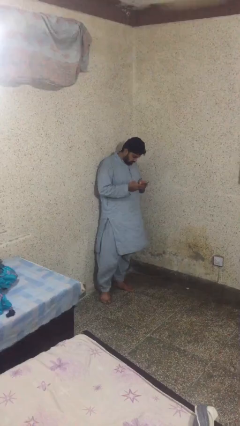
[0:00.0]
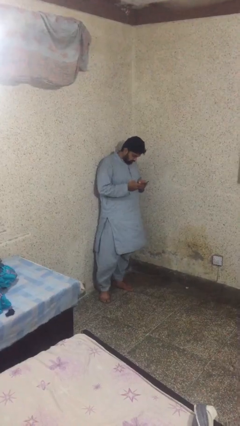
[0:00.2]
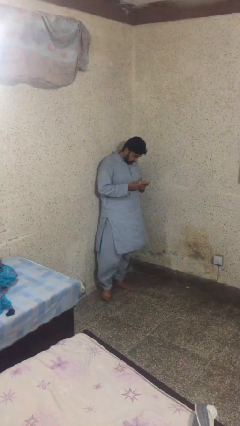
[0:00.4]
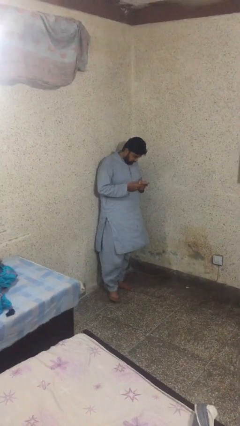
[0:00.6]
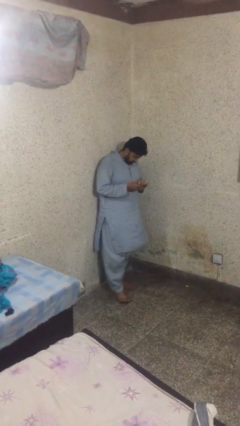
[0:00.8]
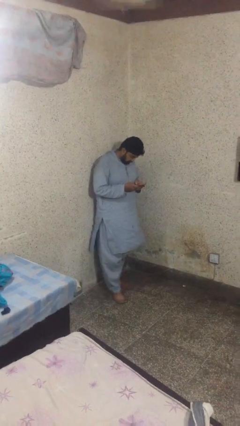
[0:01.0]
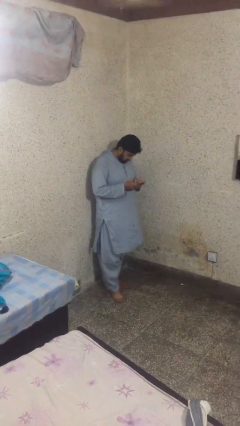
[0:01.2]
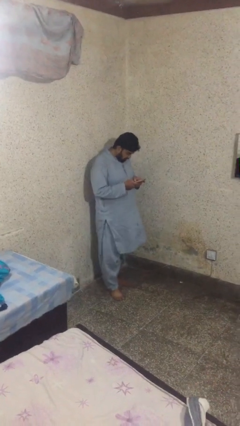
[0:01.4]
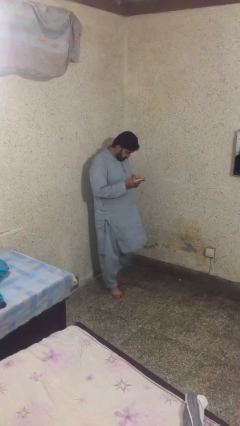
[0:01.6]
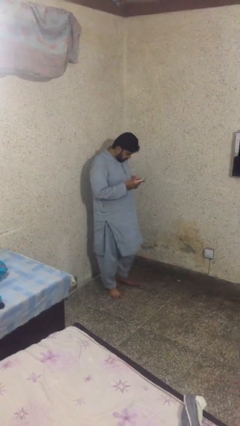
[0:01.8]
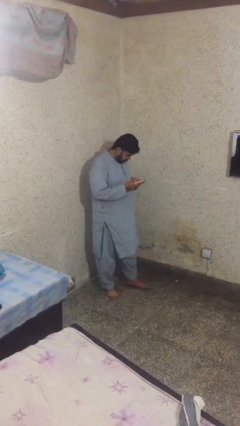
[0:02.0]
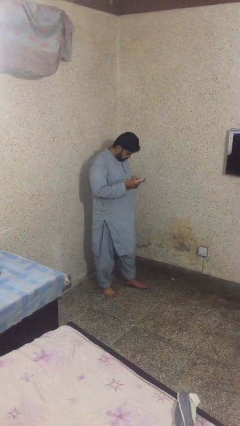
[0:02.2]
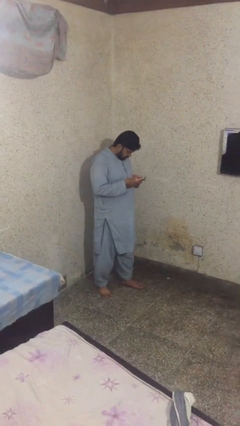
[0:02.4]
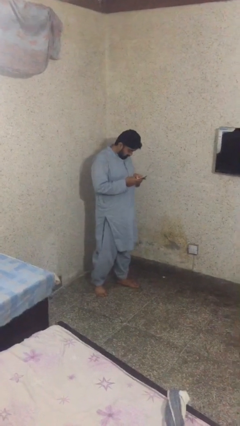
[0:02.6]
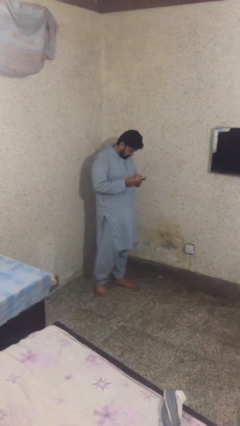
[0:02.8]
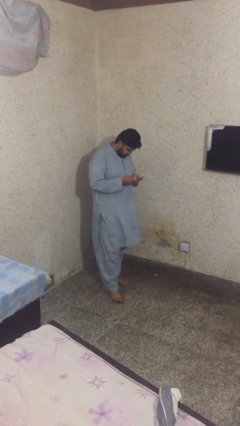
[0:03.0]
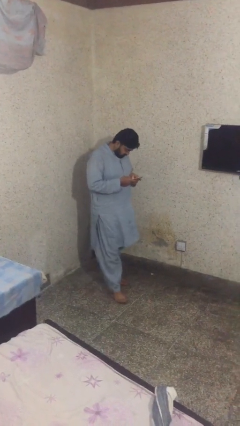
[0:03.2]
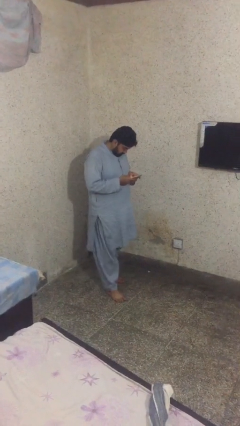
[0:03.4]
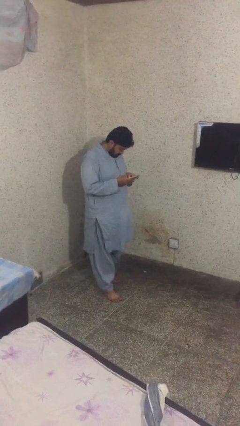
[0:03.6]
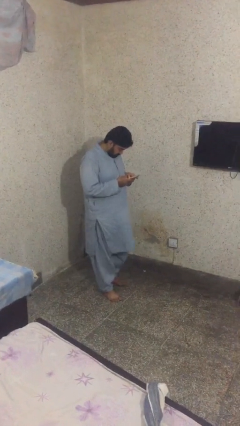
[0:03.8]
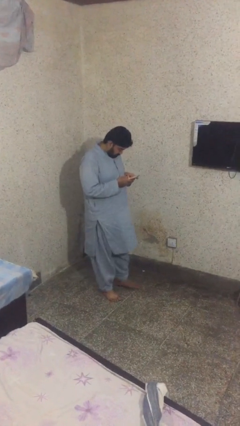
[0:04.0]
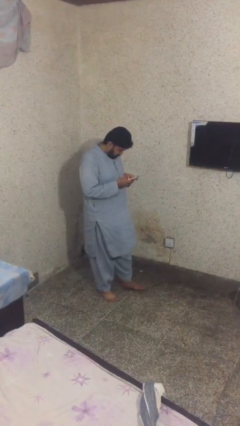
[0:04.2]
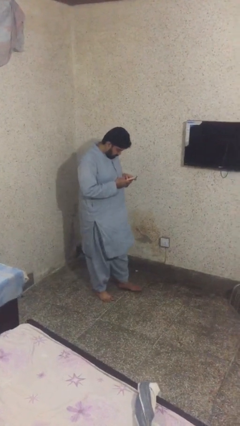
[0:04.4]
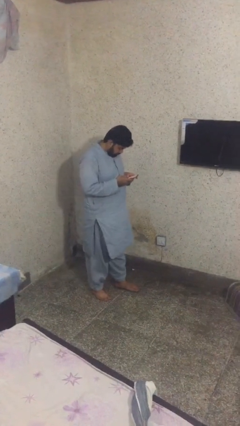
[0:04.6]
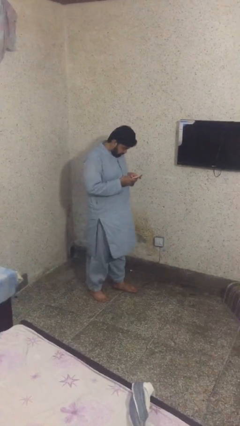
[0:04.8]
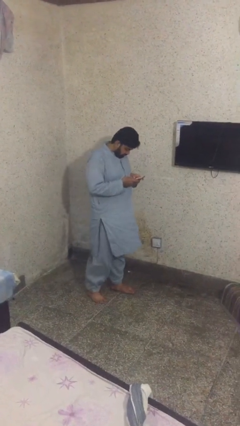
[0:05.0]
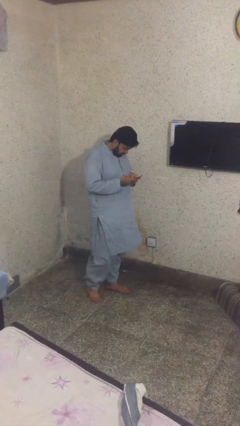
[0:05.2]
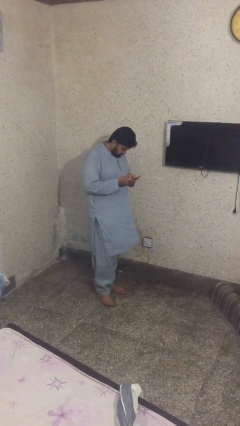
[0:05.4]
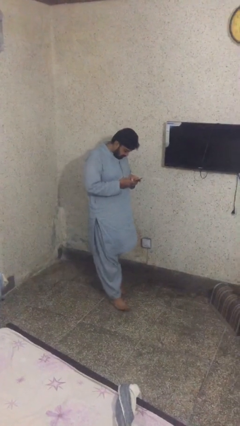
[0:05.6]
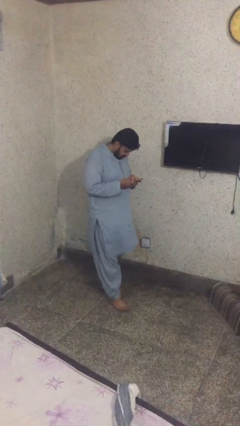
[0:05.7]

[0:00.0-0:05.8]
person texts on phone

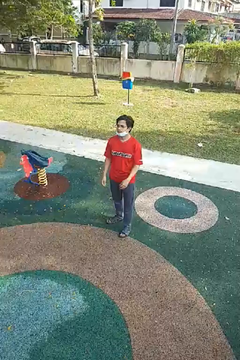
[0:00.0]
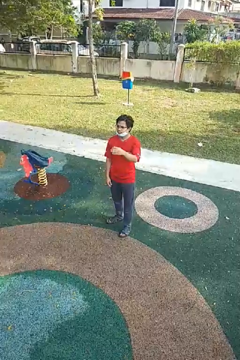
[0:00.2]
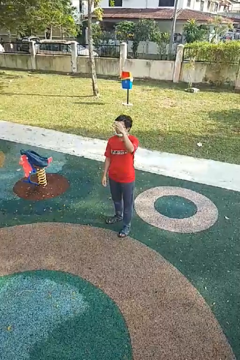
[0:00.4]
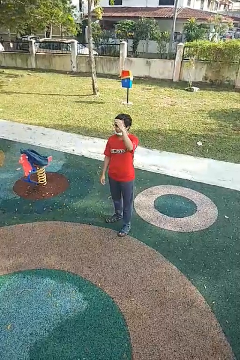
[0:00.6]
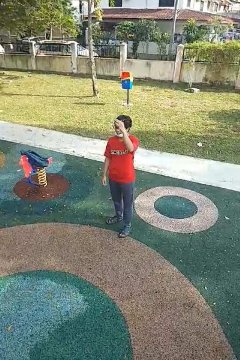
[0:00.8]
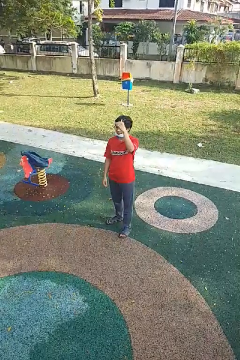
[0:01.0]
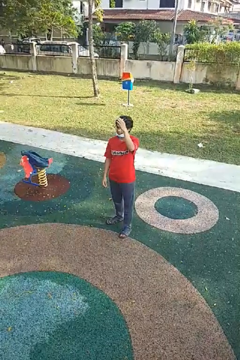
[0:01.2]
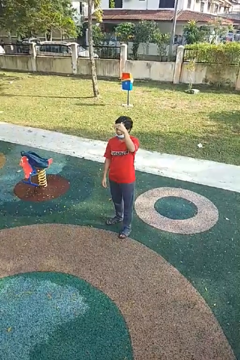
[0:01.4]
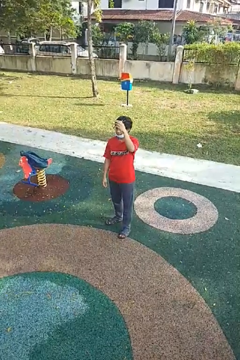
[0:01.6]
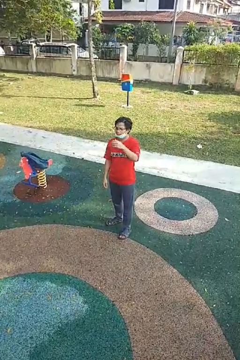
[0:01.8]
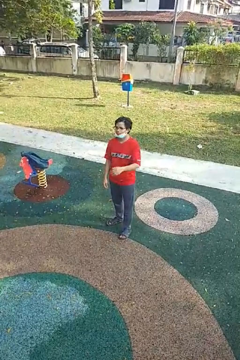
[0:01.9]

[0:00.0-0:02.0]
person gestures come here

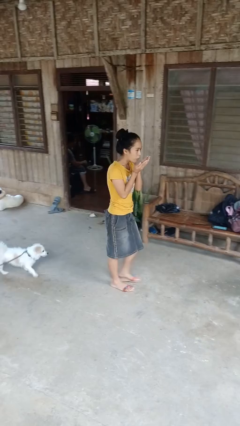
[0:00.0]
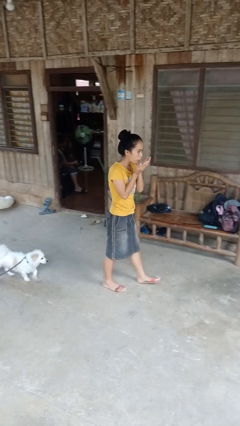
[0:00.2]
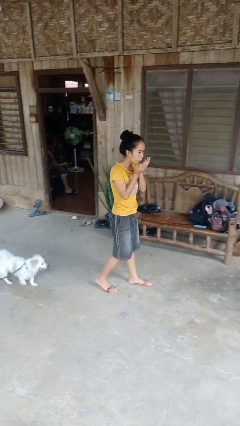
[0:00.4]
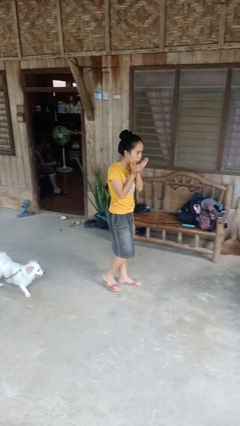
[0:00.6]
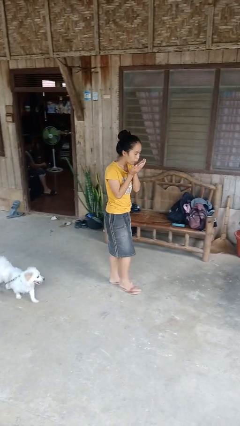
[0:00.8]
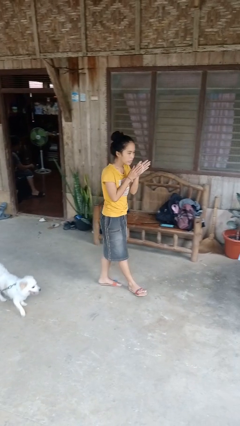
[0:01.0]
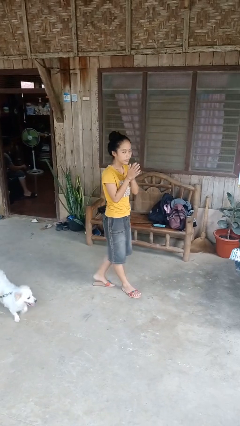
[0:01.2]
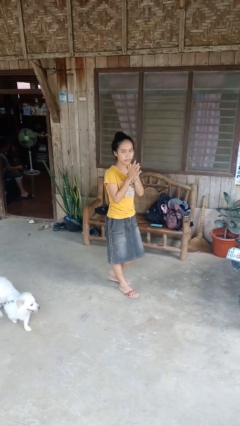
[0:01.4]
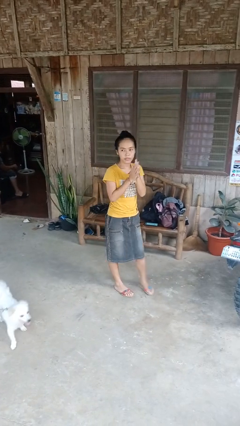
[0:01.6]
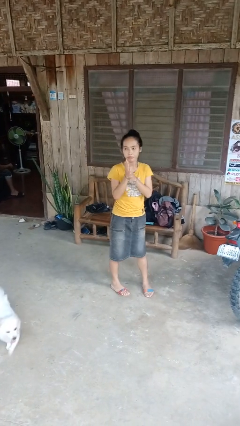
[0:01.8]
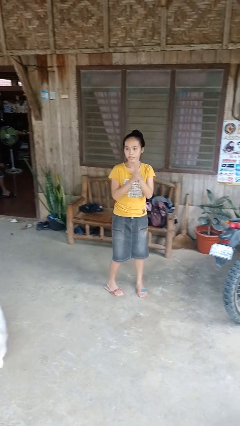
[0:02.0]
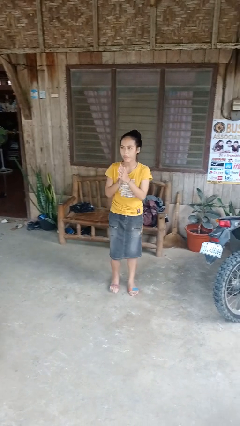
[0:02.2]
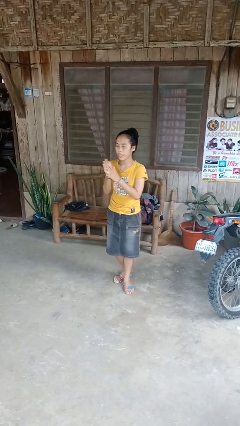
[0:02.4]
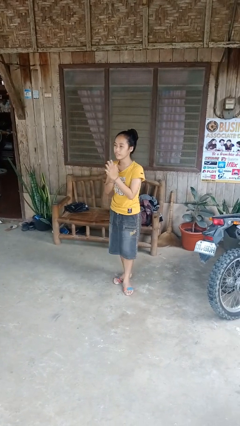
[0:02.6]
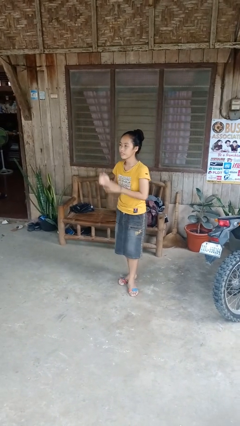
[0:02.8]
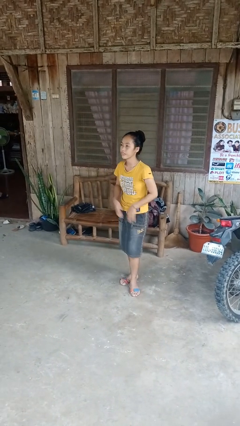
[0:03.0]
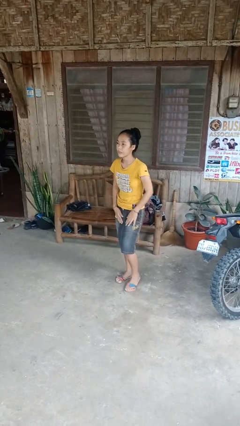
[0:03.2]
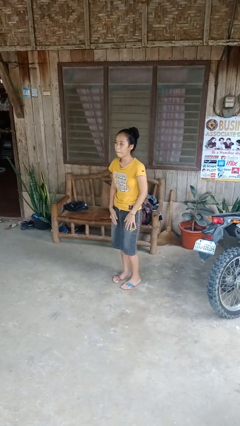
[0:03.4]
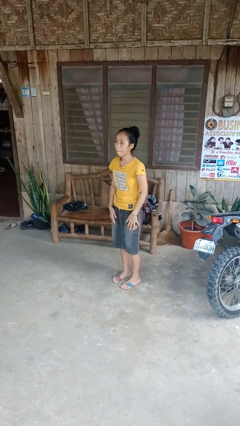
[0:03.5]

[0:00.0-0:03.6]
person blows into hands

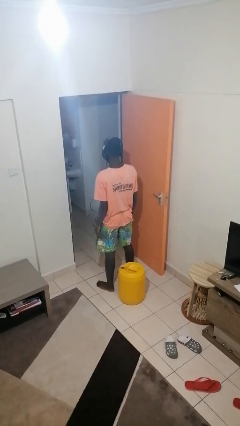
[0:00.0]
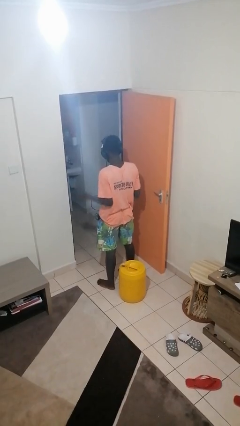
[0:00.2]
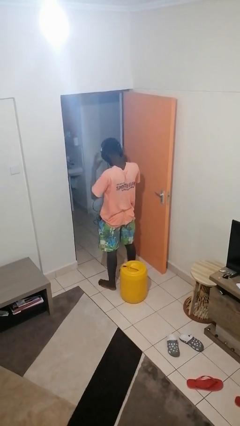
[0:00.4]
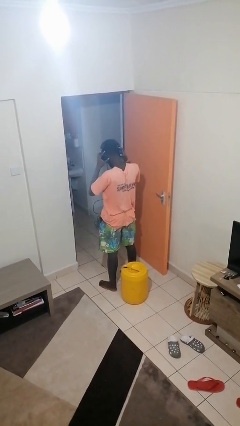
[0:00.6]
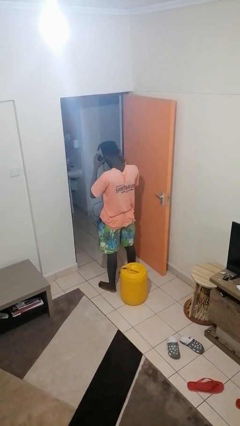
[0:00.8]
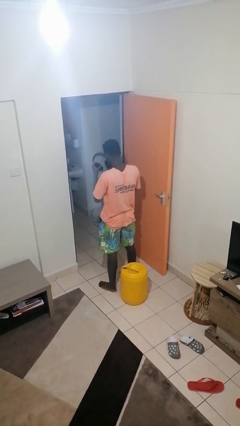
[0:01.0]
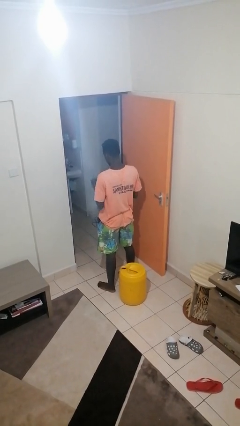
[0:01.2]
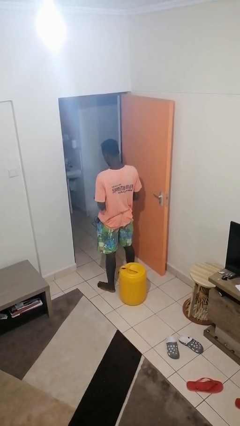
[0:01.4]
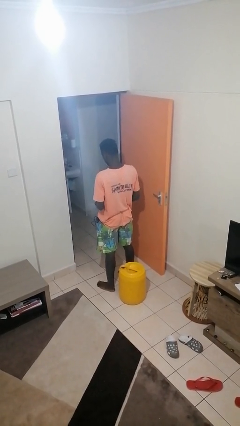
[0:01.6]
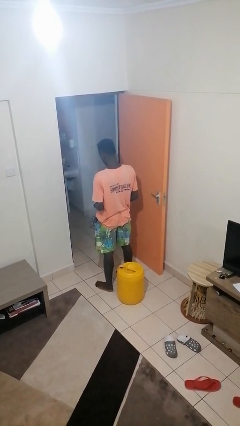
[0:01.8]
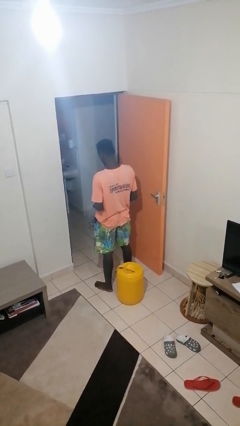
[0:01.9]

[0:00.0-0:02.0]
person takes off headphones

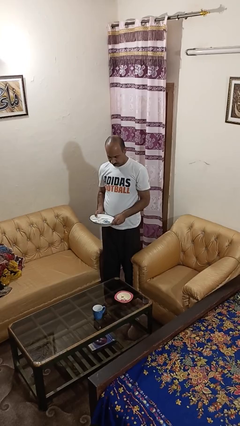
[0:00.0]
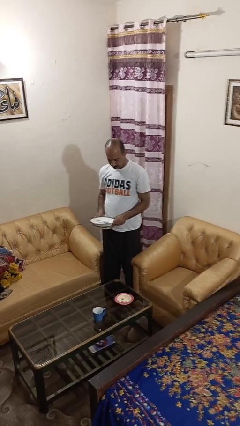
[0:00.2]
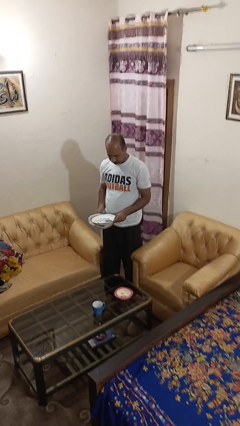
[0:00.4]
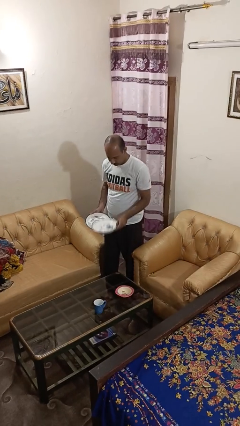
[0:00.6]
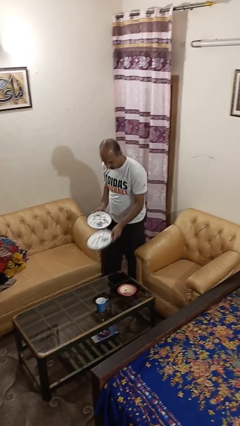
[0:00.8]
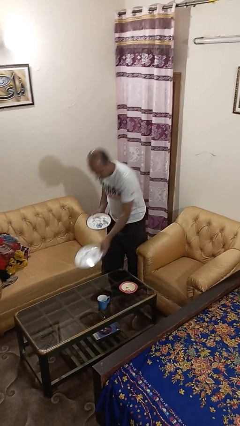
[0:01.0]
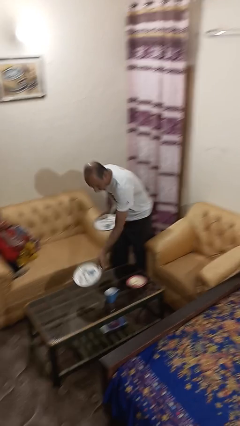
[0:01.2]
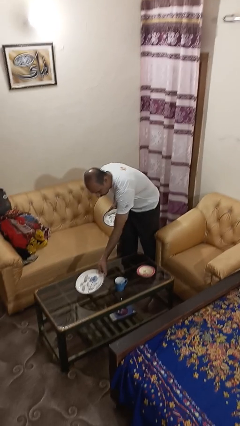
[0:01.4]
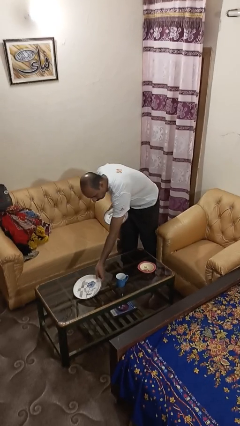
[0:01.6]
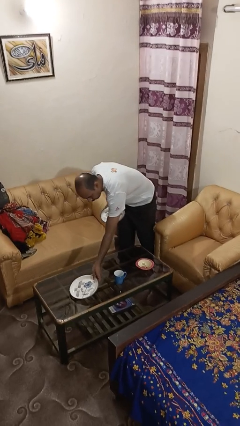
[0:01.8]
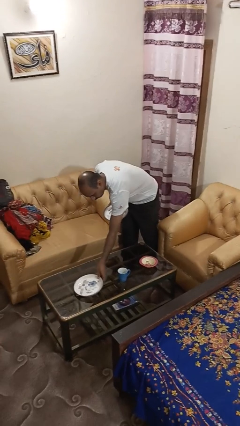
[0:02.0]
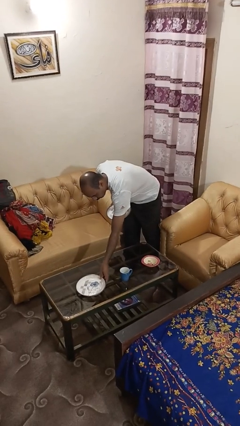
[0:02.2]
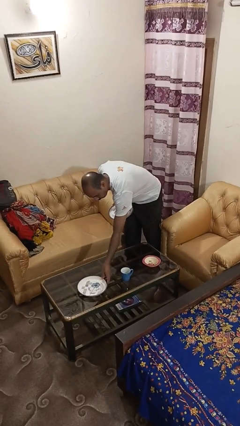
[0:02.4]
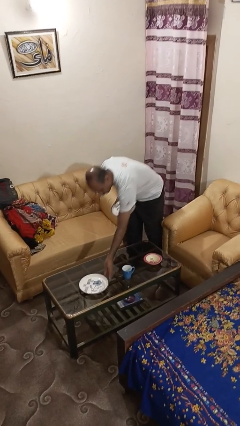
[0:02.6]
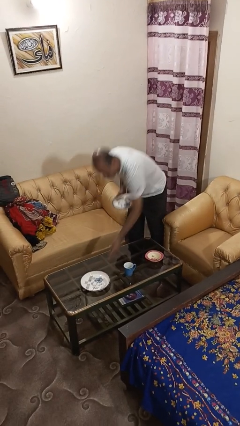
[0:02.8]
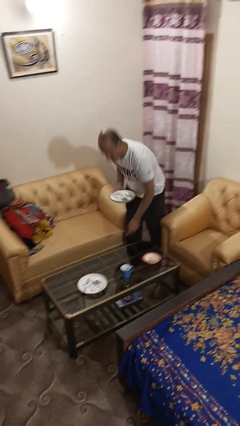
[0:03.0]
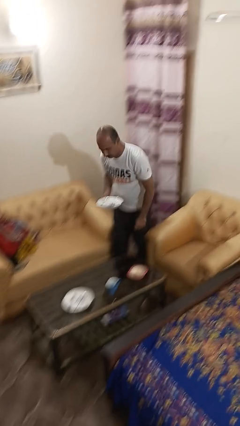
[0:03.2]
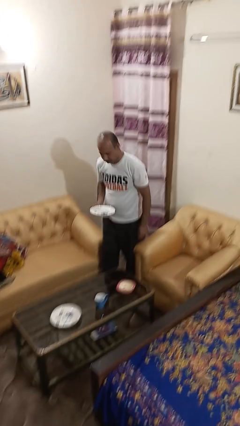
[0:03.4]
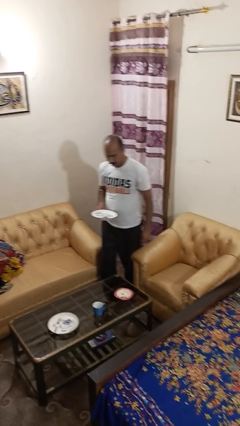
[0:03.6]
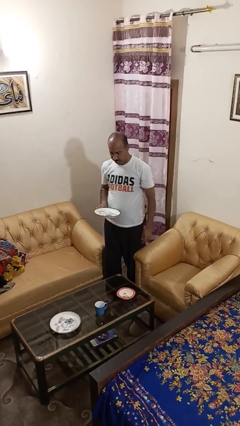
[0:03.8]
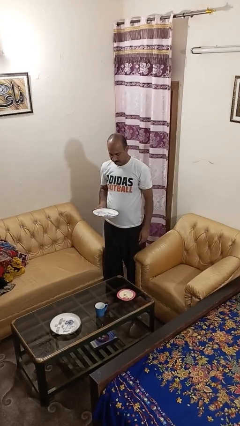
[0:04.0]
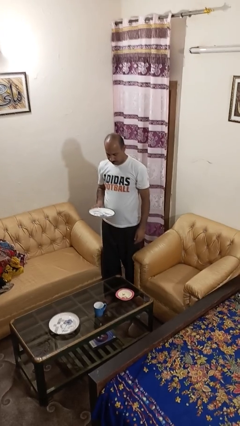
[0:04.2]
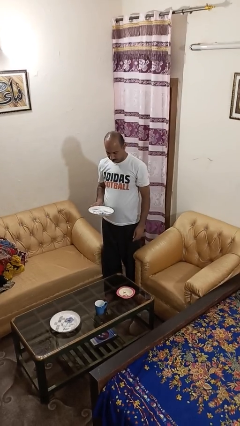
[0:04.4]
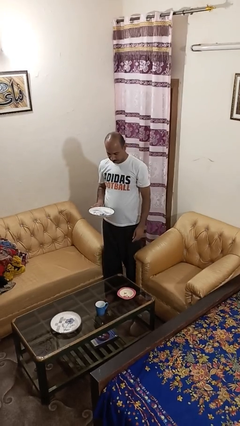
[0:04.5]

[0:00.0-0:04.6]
person sets table
